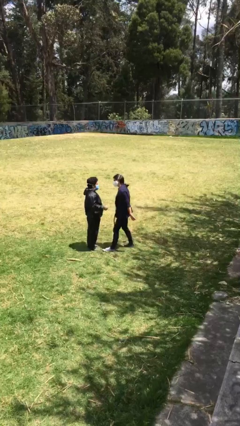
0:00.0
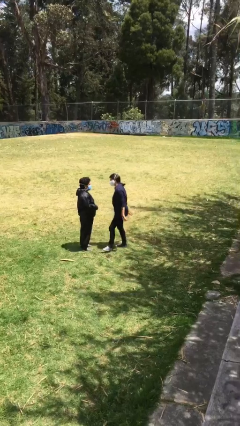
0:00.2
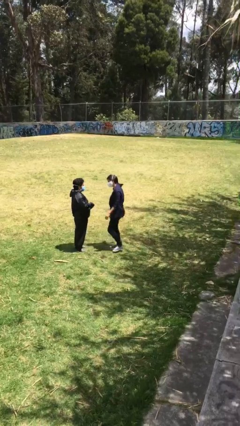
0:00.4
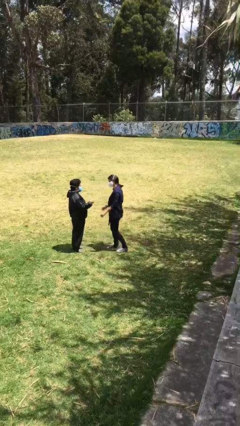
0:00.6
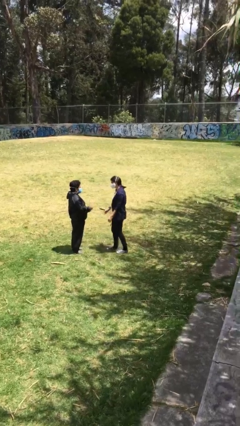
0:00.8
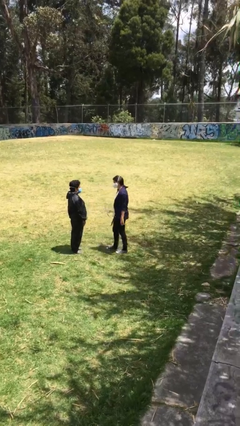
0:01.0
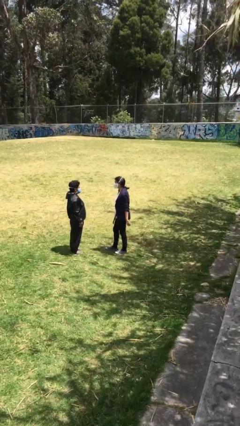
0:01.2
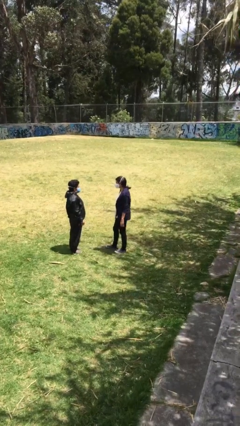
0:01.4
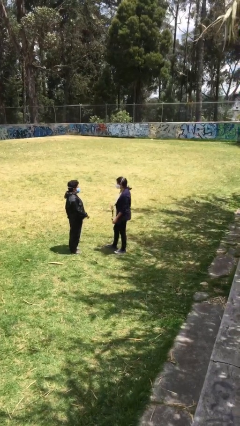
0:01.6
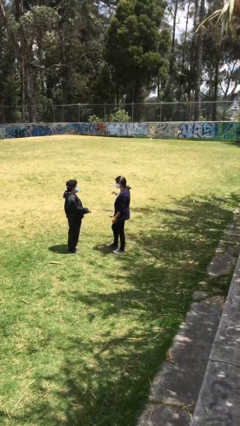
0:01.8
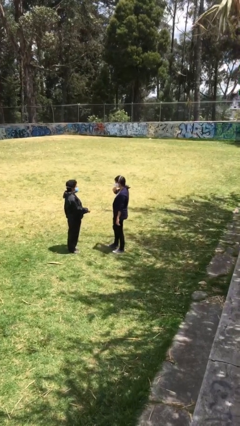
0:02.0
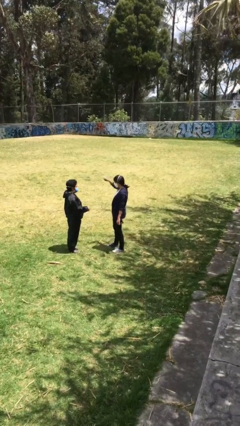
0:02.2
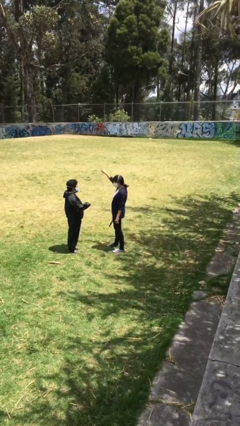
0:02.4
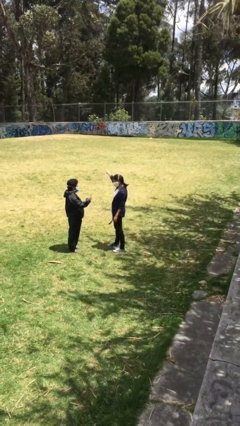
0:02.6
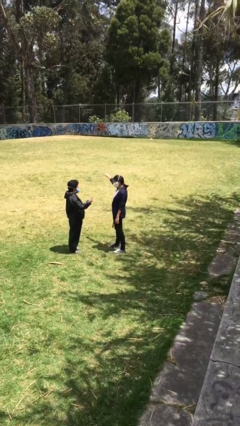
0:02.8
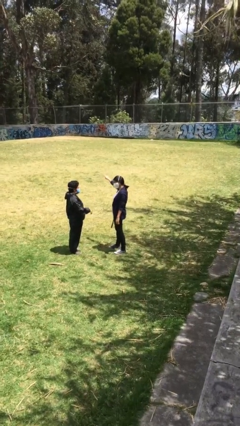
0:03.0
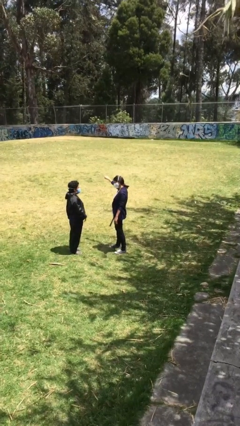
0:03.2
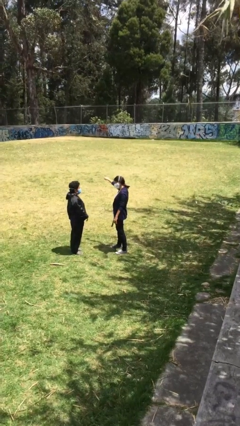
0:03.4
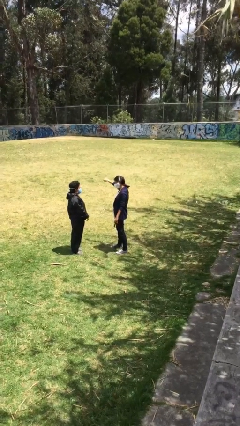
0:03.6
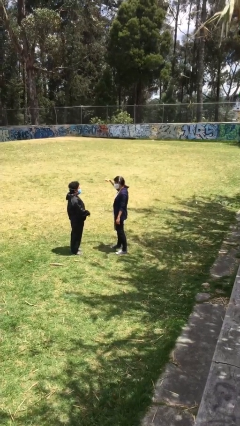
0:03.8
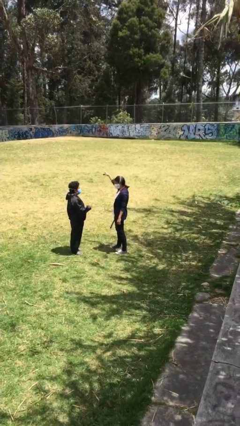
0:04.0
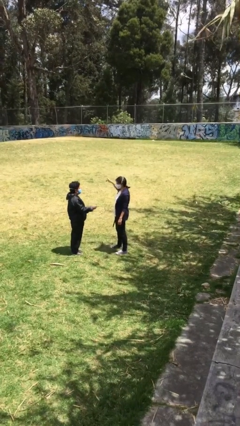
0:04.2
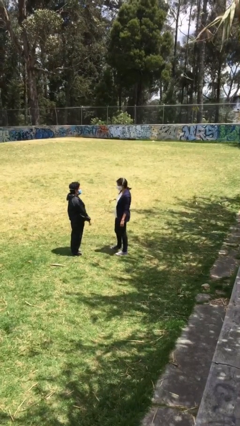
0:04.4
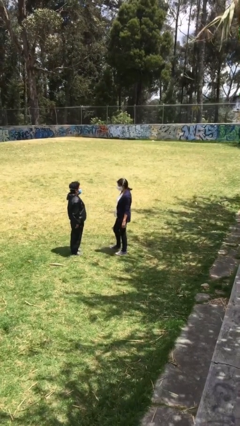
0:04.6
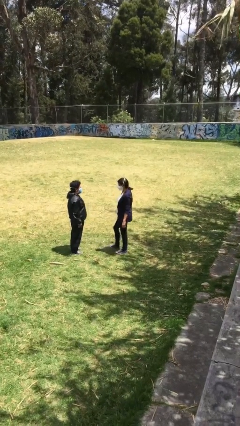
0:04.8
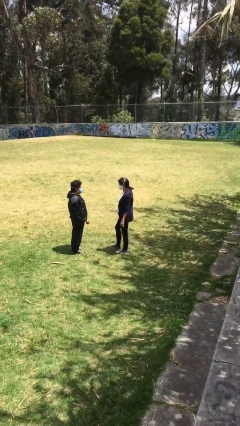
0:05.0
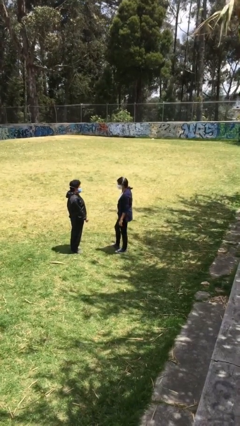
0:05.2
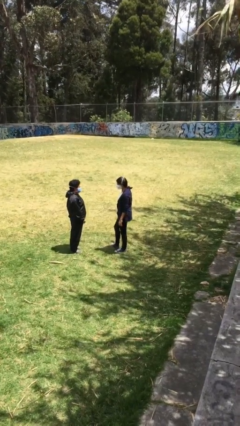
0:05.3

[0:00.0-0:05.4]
person talks to person

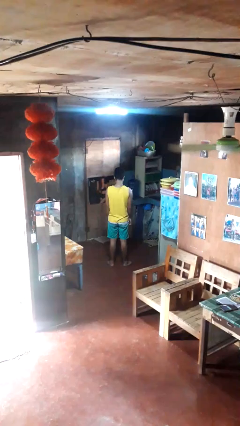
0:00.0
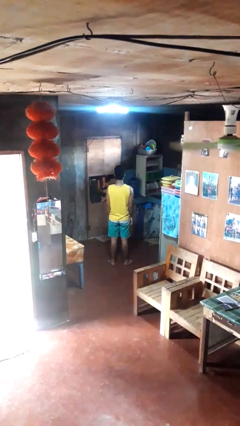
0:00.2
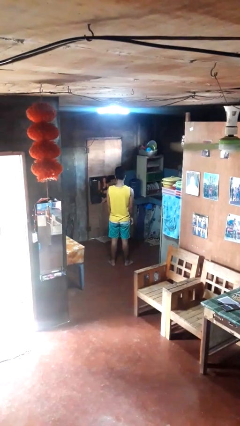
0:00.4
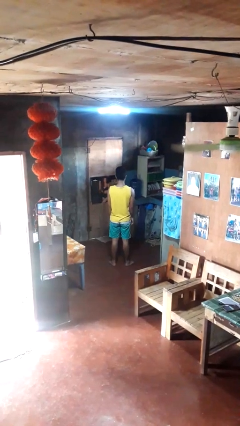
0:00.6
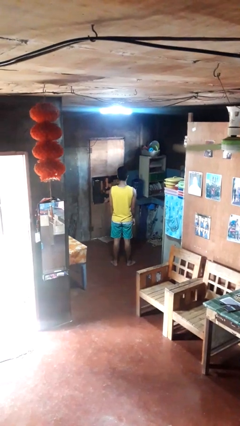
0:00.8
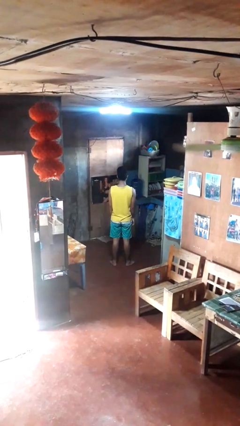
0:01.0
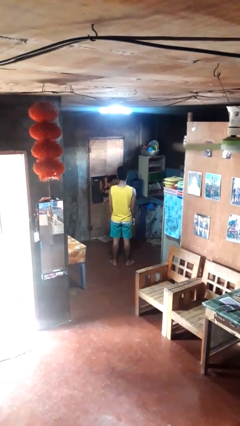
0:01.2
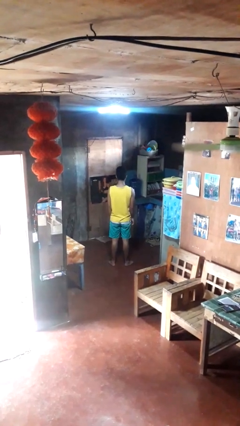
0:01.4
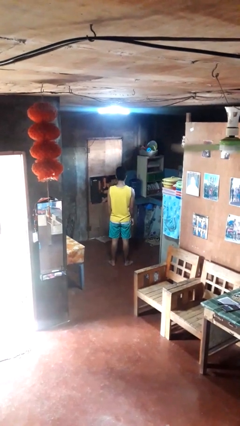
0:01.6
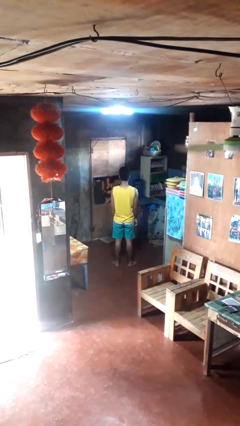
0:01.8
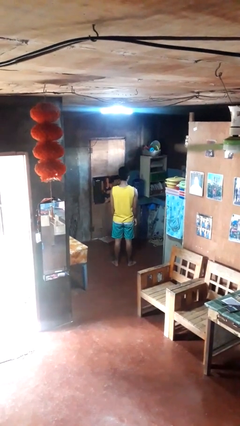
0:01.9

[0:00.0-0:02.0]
person nods head

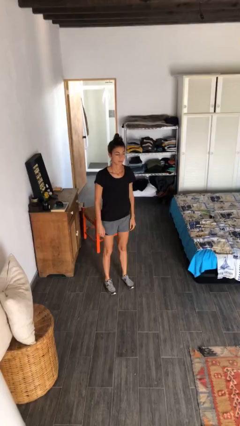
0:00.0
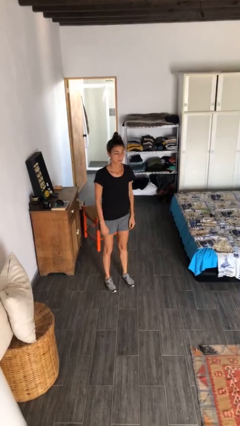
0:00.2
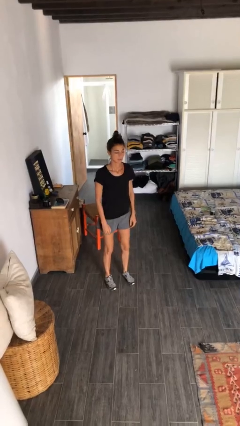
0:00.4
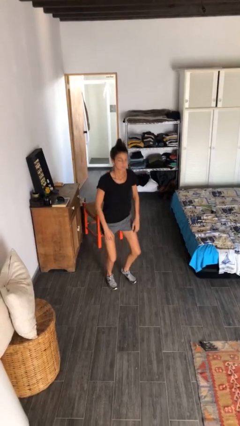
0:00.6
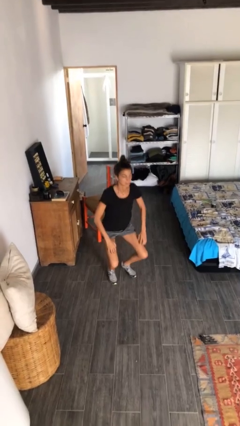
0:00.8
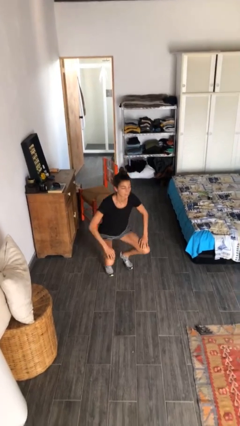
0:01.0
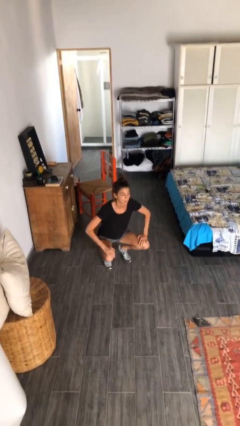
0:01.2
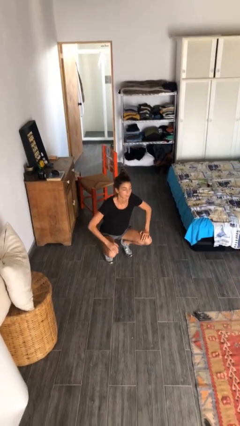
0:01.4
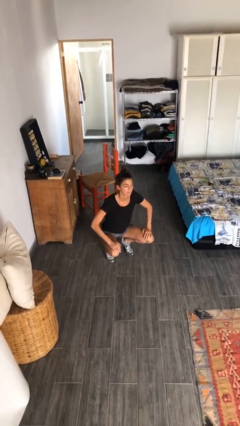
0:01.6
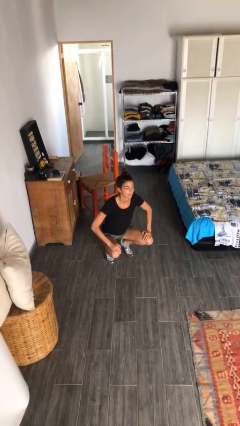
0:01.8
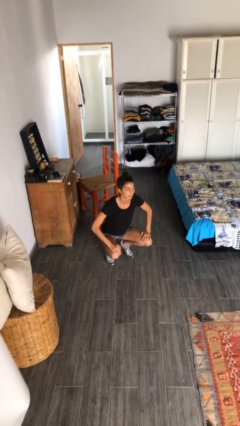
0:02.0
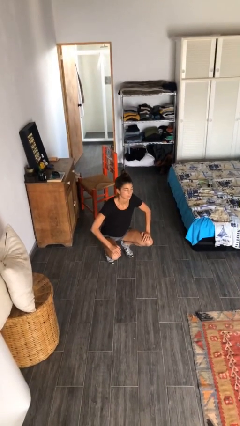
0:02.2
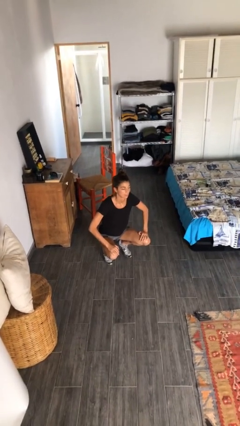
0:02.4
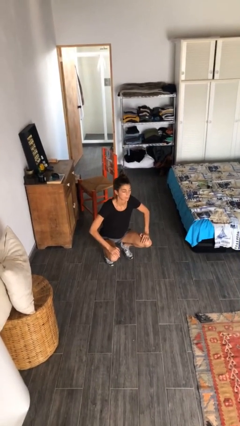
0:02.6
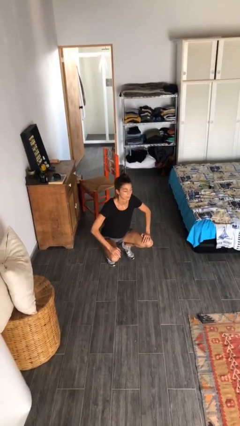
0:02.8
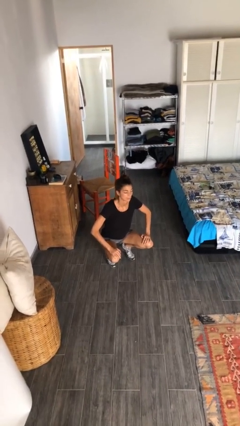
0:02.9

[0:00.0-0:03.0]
person squats

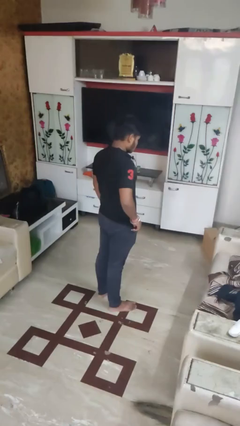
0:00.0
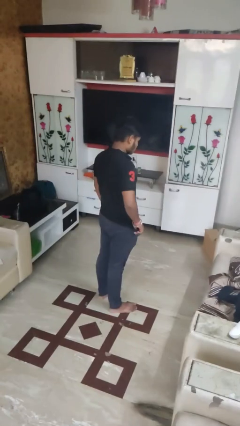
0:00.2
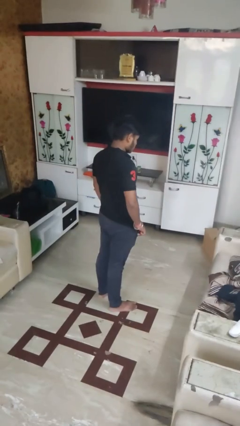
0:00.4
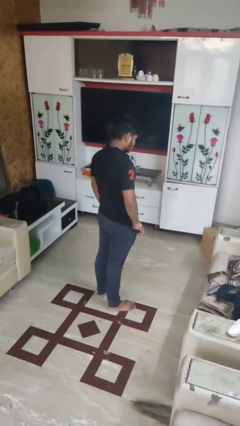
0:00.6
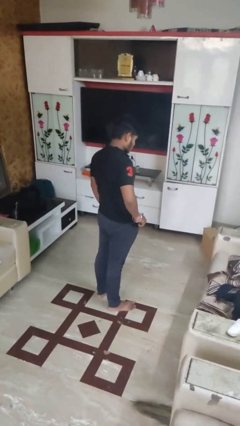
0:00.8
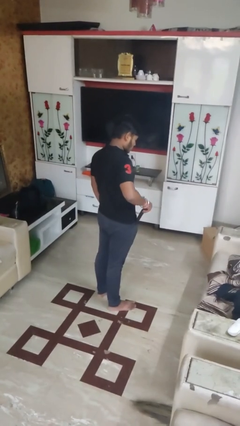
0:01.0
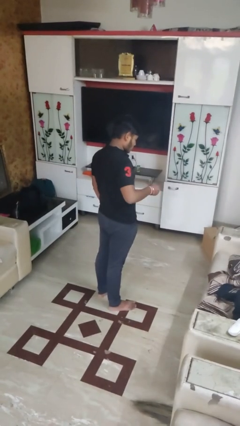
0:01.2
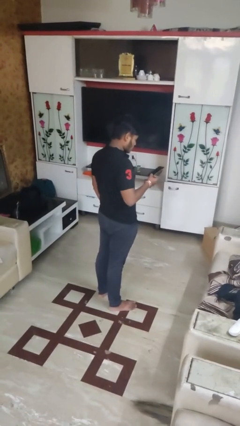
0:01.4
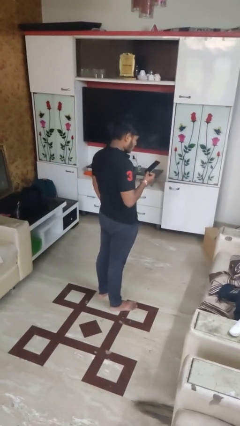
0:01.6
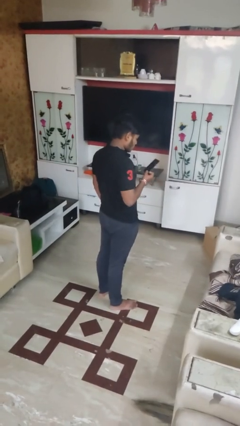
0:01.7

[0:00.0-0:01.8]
person takes phone from pocket

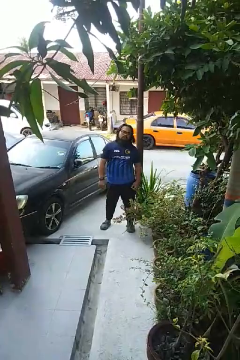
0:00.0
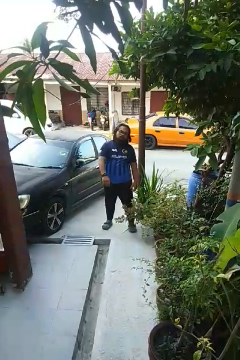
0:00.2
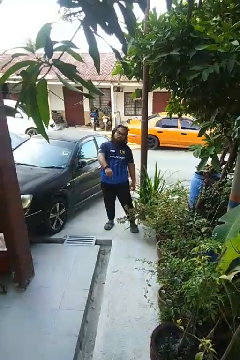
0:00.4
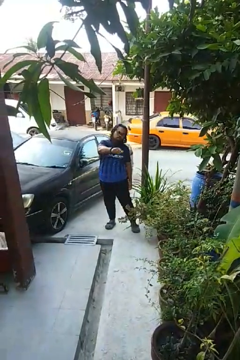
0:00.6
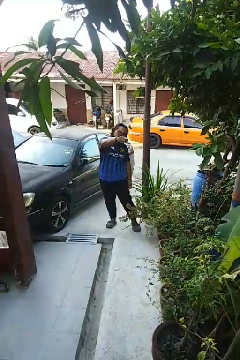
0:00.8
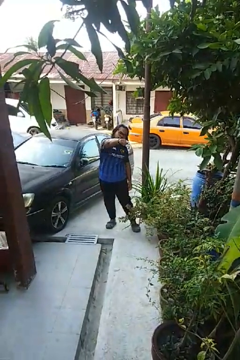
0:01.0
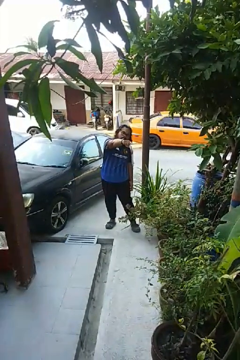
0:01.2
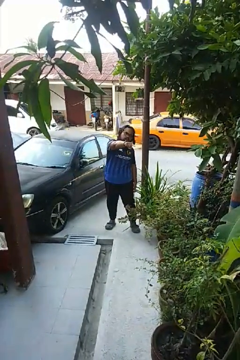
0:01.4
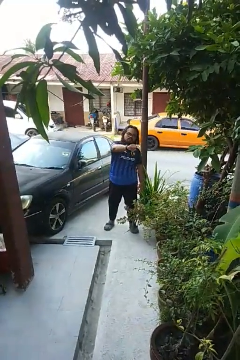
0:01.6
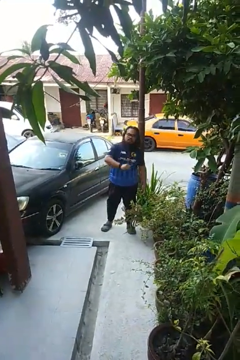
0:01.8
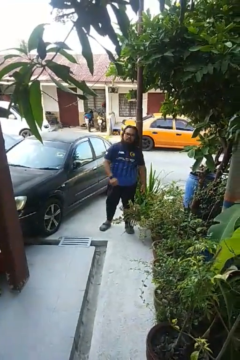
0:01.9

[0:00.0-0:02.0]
person points at person

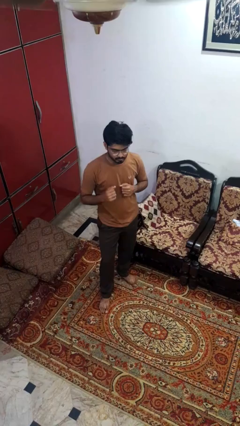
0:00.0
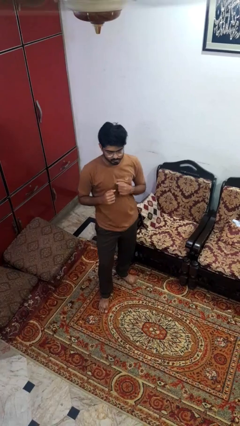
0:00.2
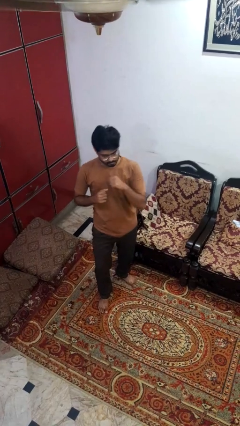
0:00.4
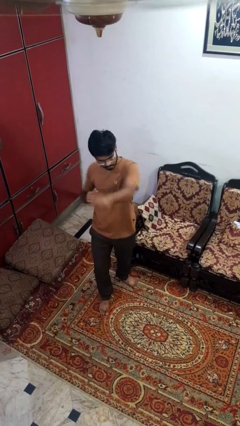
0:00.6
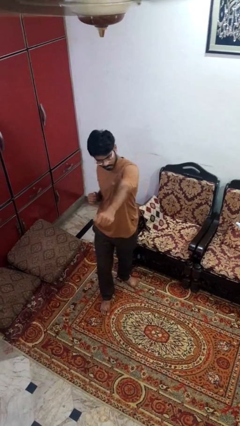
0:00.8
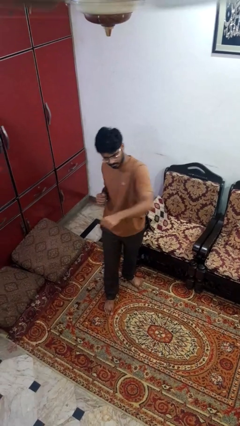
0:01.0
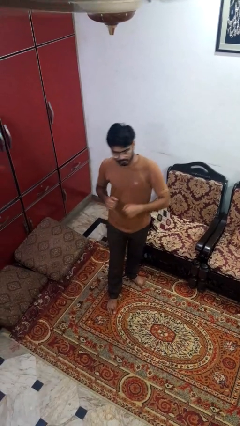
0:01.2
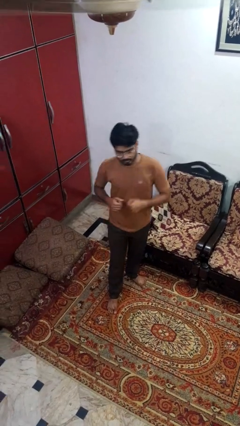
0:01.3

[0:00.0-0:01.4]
person punches

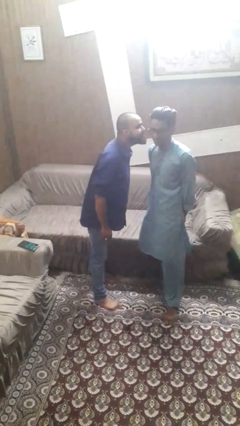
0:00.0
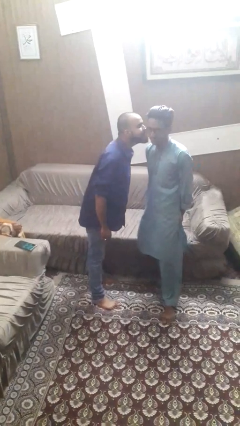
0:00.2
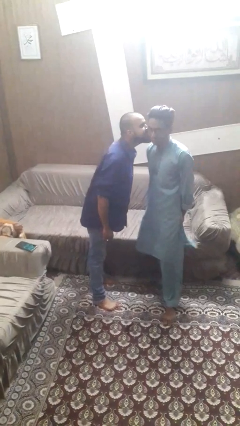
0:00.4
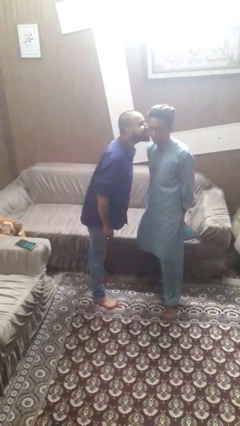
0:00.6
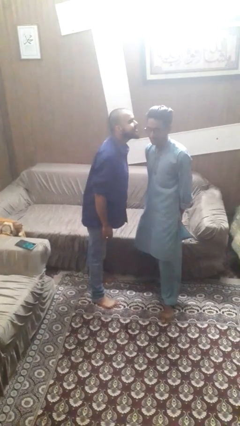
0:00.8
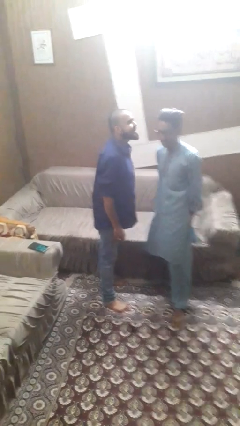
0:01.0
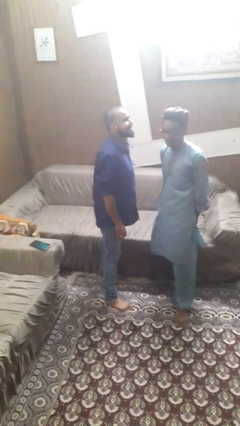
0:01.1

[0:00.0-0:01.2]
person kisses cheek of person

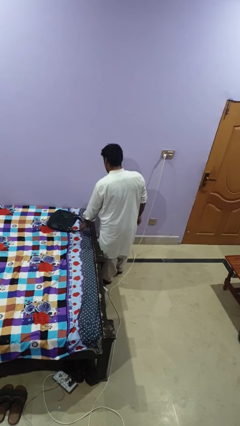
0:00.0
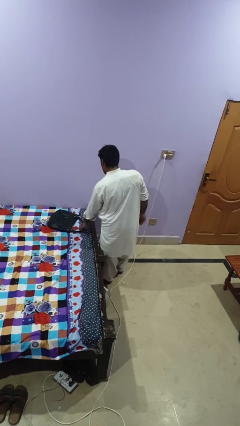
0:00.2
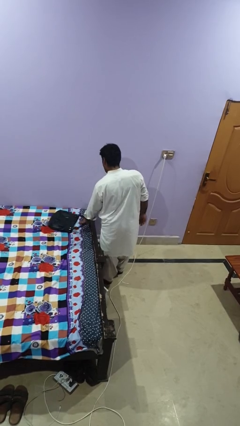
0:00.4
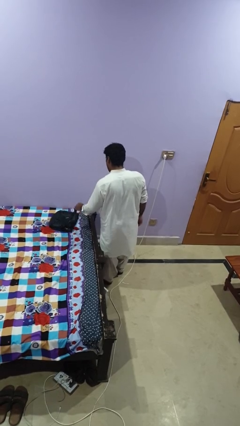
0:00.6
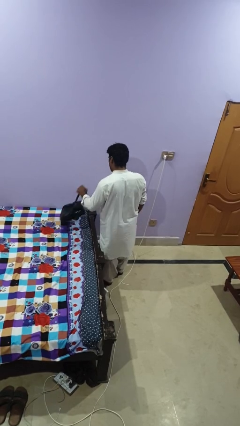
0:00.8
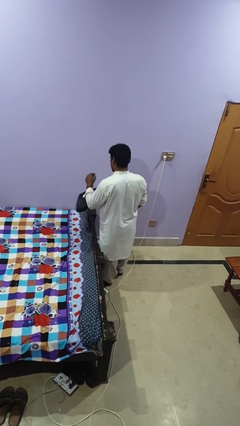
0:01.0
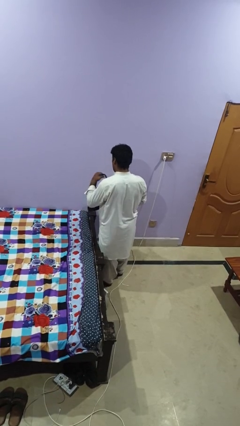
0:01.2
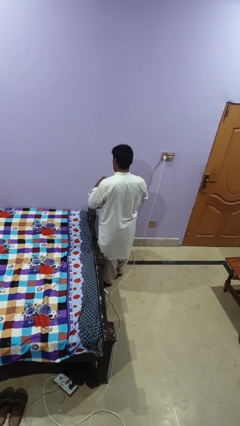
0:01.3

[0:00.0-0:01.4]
person picks up object from bed
